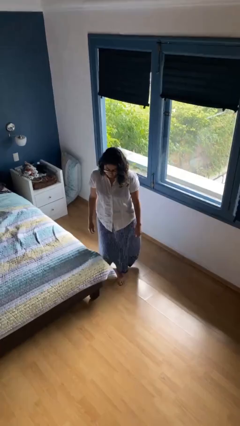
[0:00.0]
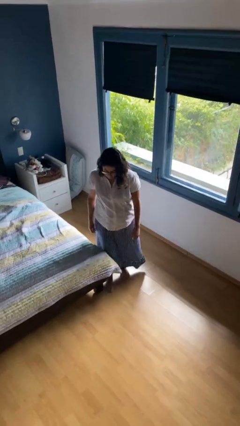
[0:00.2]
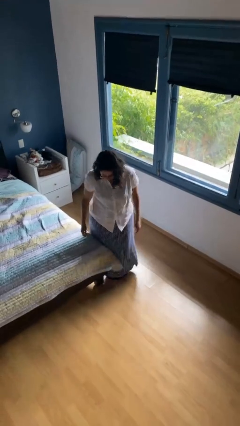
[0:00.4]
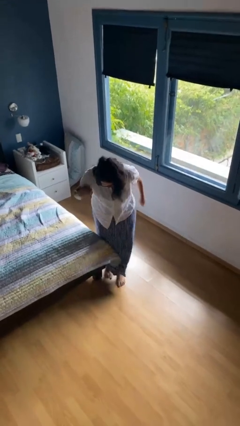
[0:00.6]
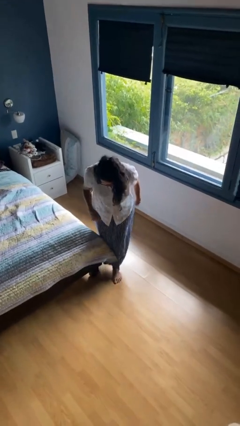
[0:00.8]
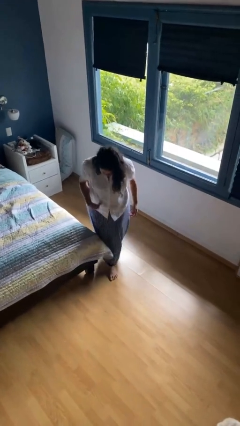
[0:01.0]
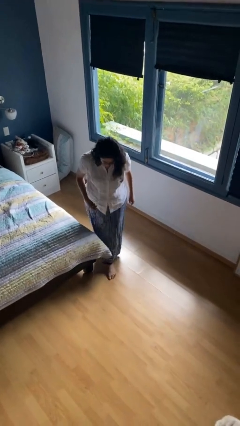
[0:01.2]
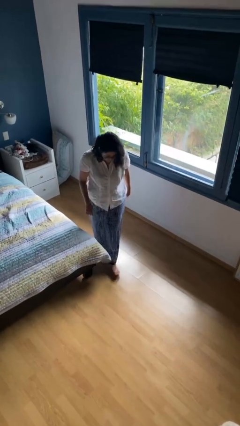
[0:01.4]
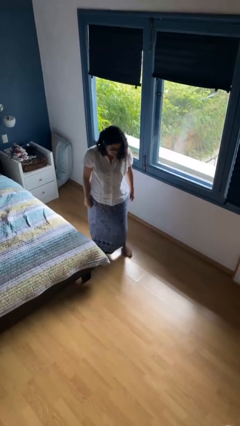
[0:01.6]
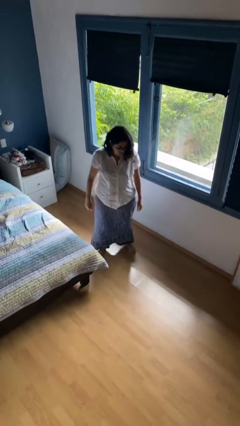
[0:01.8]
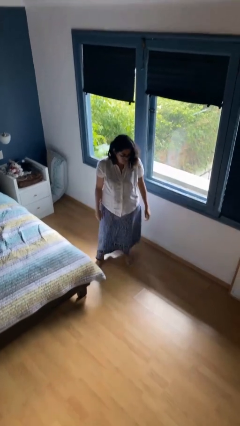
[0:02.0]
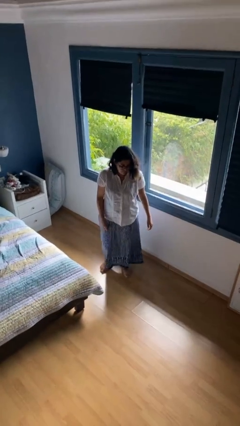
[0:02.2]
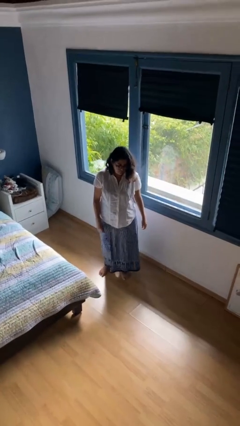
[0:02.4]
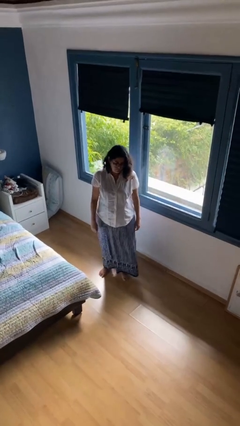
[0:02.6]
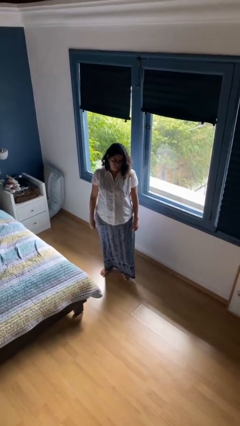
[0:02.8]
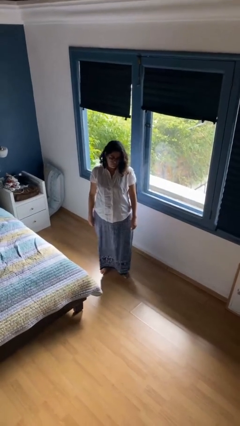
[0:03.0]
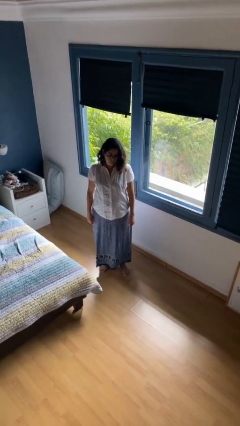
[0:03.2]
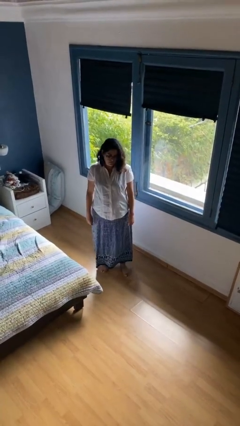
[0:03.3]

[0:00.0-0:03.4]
person stubs toe

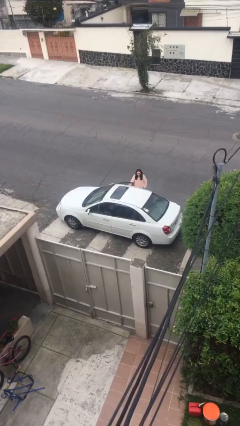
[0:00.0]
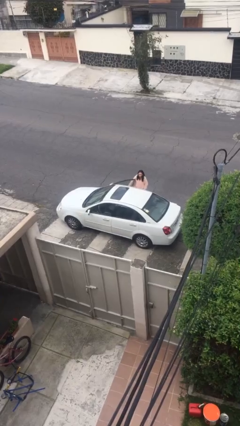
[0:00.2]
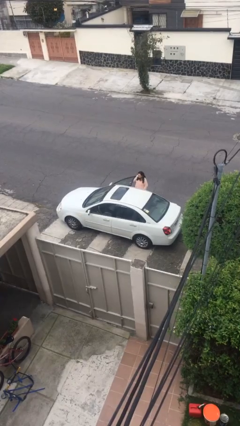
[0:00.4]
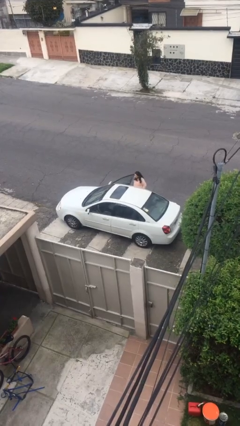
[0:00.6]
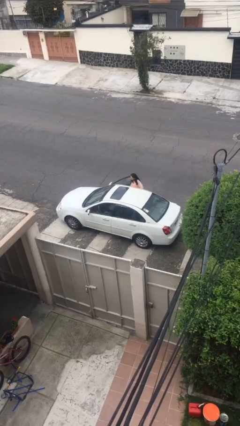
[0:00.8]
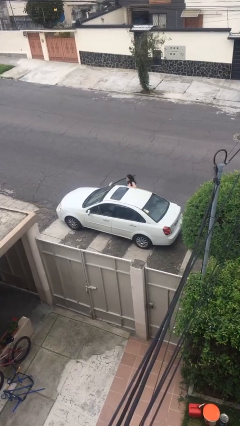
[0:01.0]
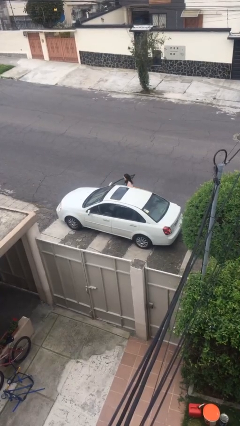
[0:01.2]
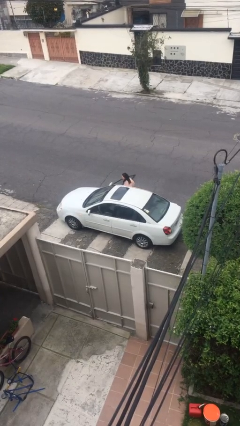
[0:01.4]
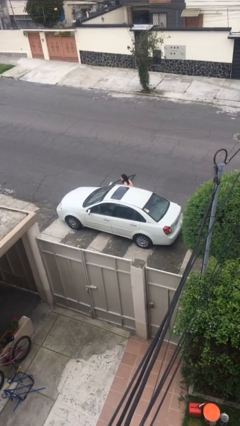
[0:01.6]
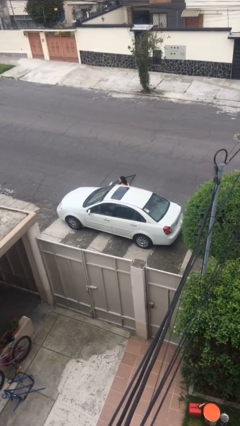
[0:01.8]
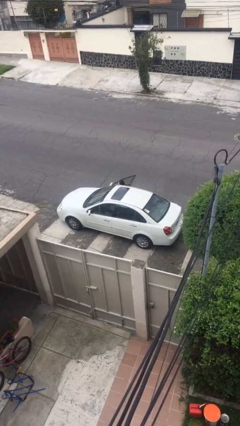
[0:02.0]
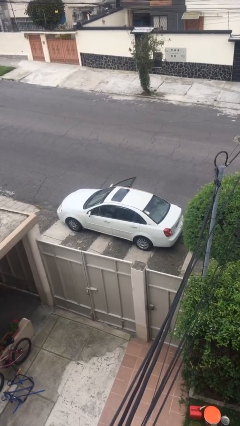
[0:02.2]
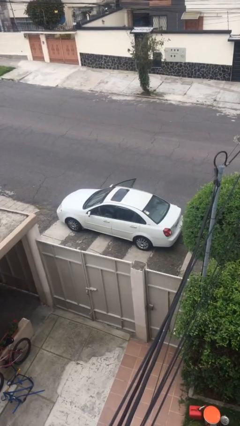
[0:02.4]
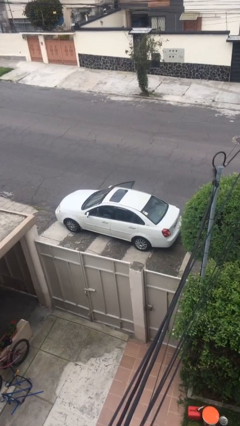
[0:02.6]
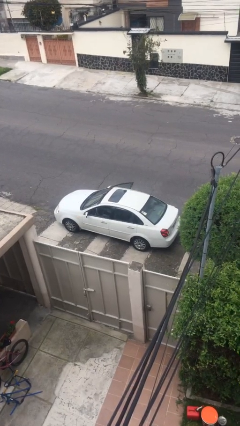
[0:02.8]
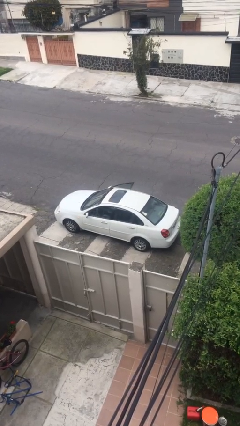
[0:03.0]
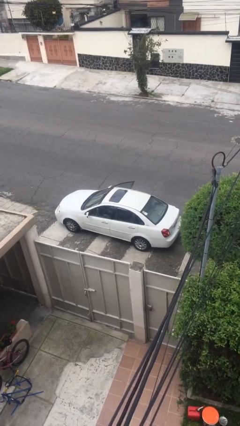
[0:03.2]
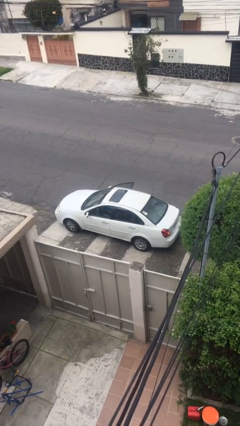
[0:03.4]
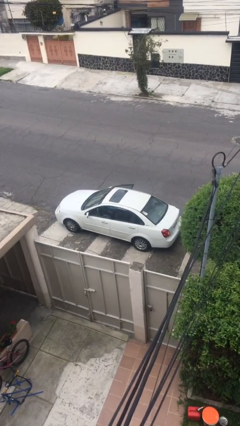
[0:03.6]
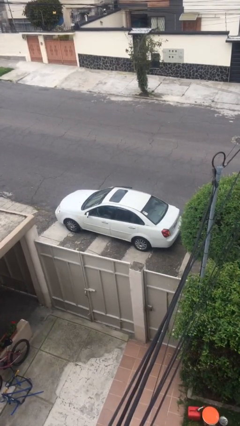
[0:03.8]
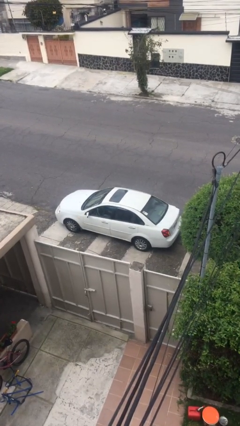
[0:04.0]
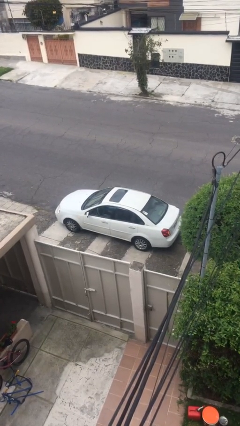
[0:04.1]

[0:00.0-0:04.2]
car picks up person

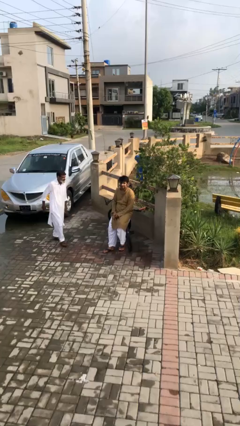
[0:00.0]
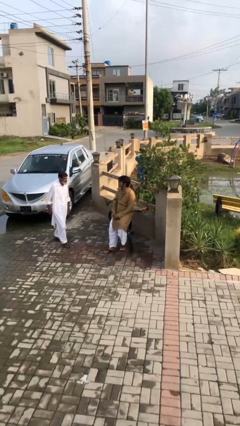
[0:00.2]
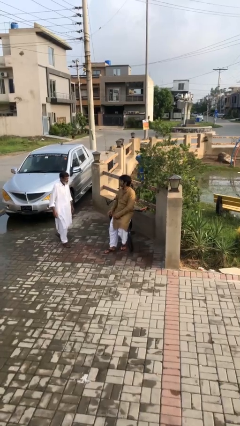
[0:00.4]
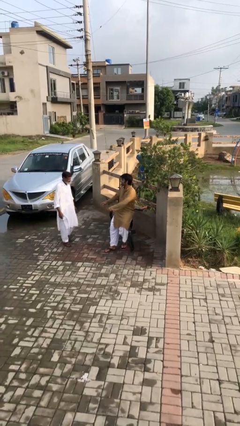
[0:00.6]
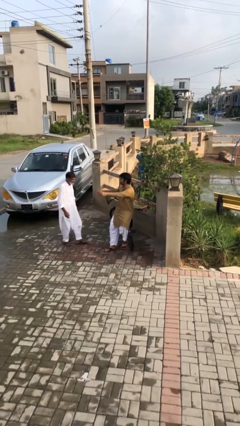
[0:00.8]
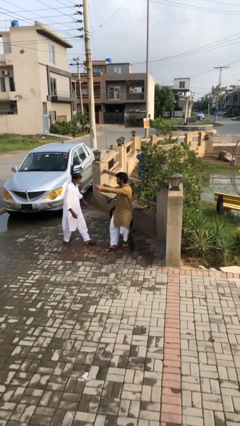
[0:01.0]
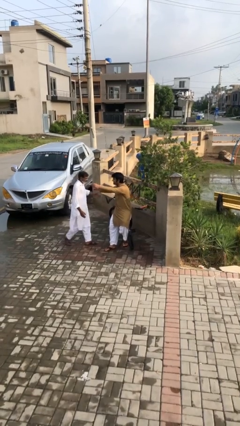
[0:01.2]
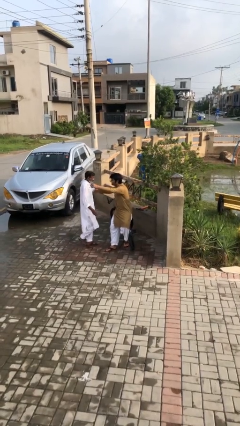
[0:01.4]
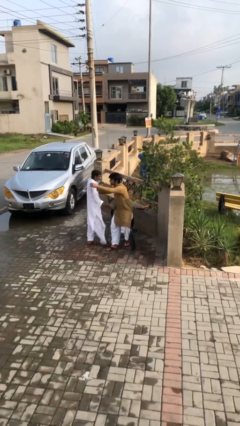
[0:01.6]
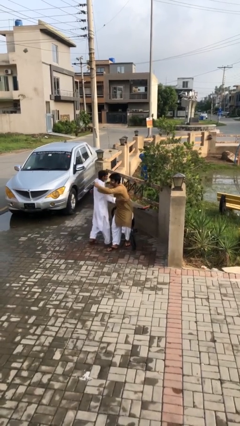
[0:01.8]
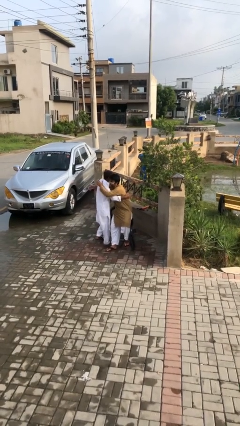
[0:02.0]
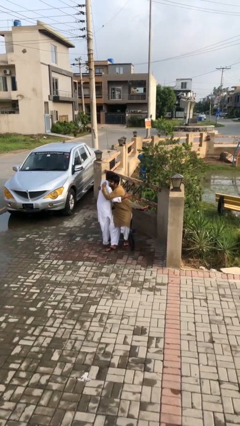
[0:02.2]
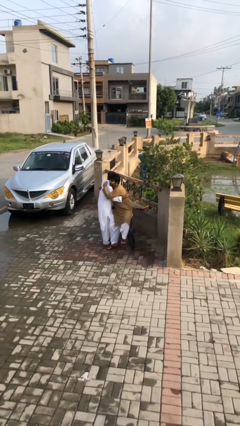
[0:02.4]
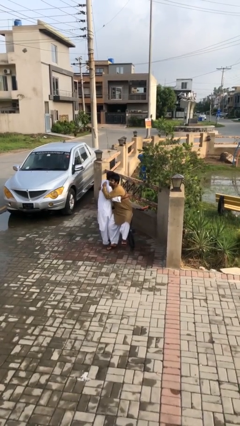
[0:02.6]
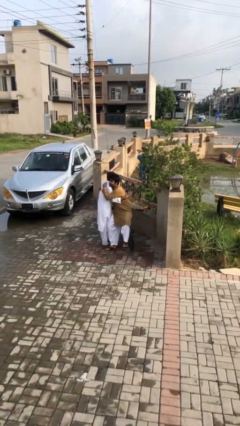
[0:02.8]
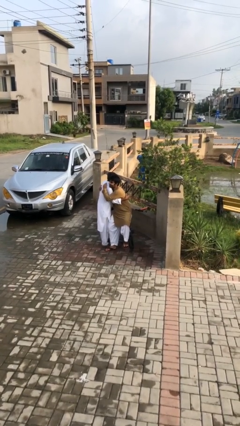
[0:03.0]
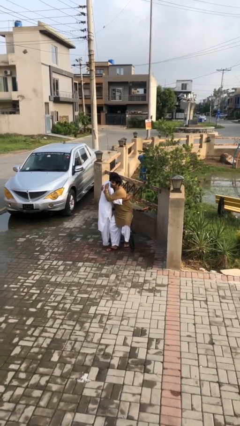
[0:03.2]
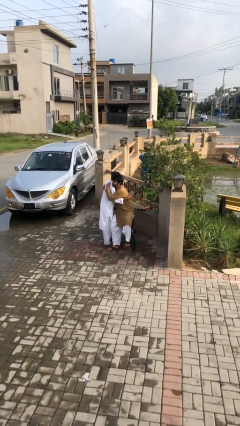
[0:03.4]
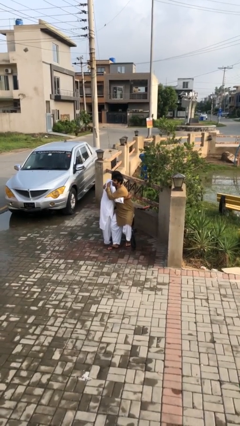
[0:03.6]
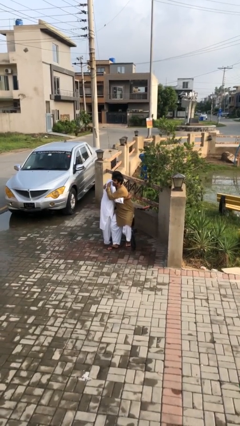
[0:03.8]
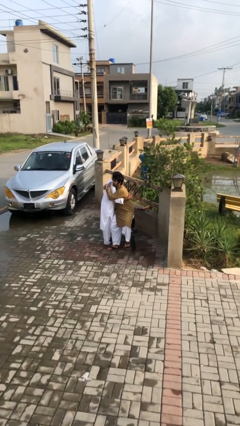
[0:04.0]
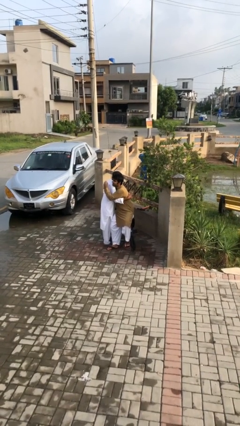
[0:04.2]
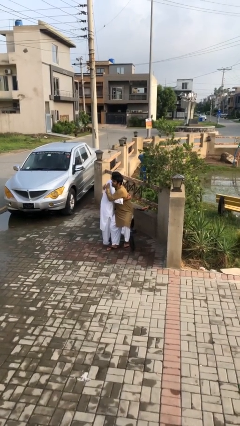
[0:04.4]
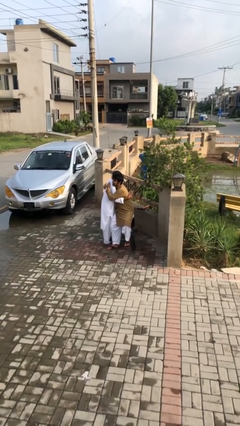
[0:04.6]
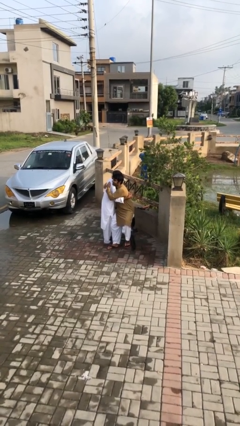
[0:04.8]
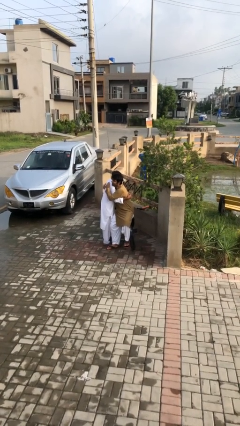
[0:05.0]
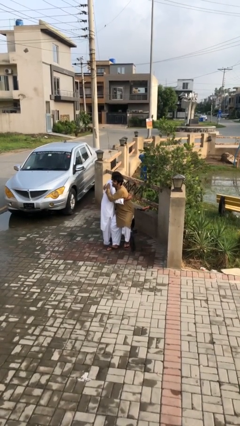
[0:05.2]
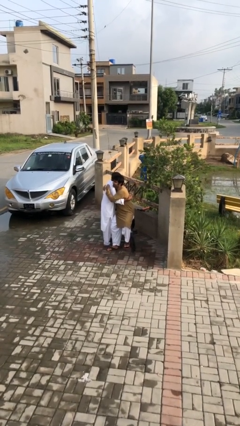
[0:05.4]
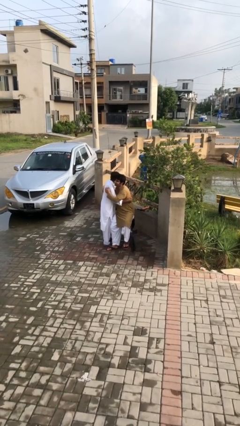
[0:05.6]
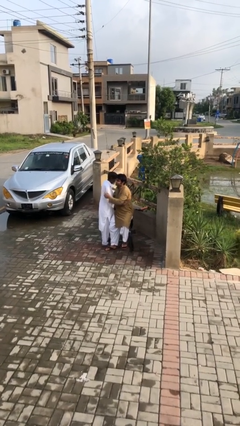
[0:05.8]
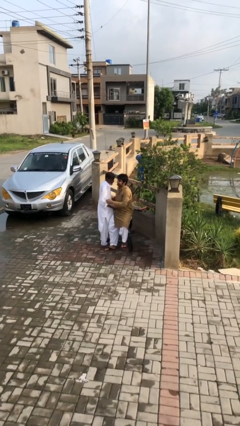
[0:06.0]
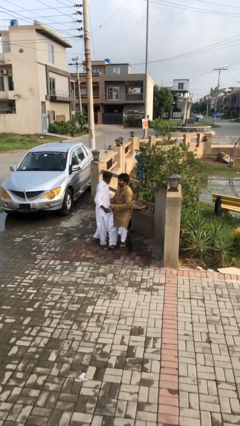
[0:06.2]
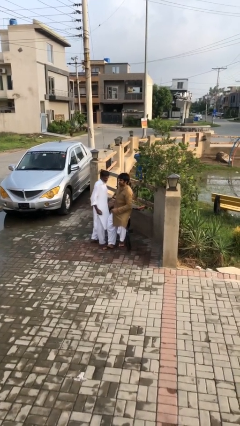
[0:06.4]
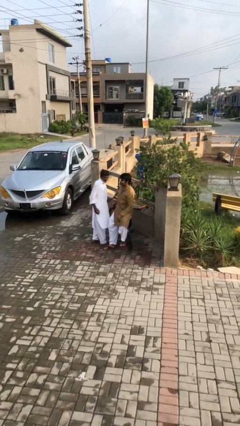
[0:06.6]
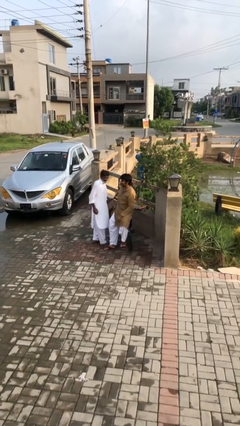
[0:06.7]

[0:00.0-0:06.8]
person embraces person

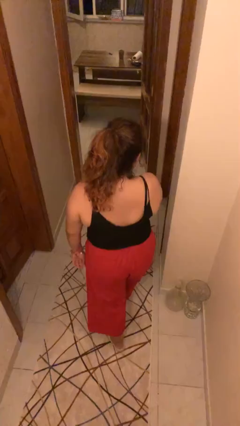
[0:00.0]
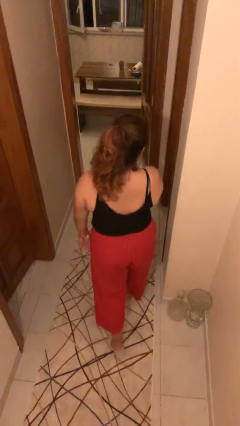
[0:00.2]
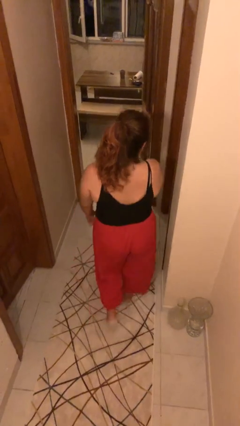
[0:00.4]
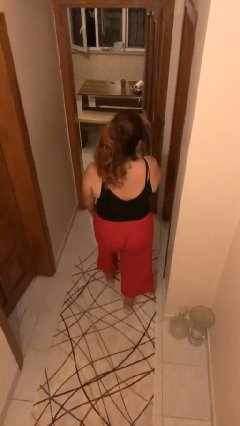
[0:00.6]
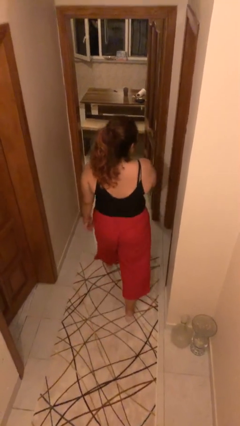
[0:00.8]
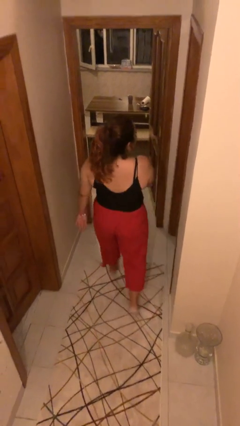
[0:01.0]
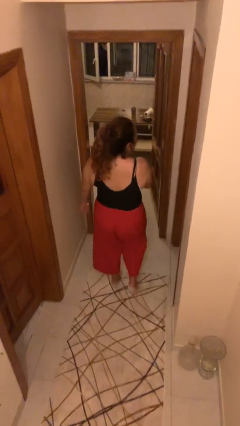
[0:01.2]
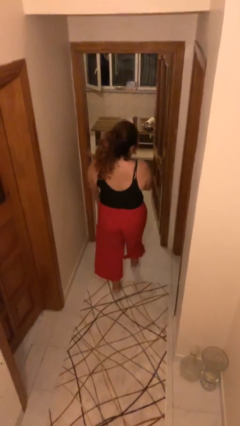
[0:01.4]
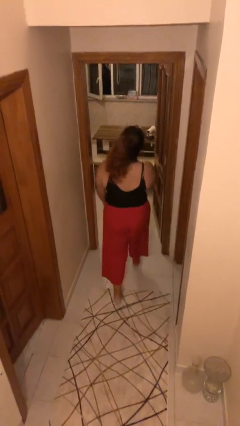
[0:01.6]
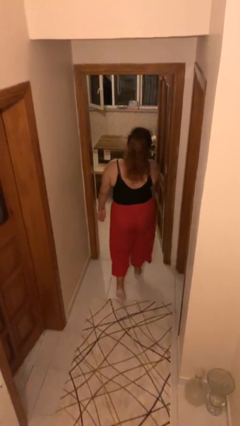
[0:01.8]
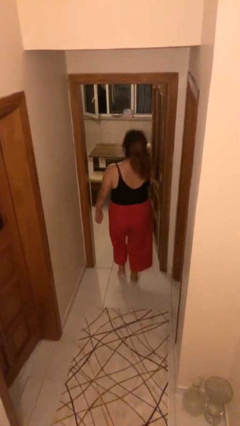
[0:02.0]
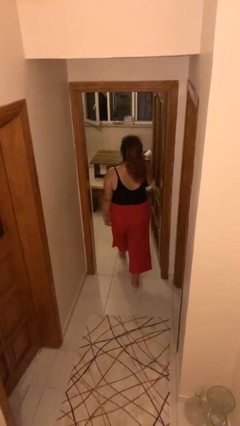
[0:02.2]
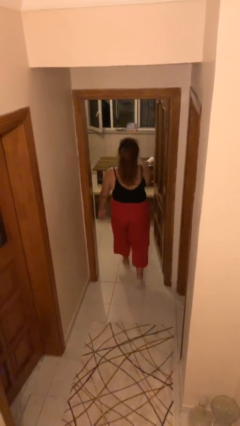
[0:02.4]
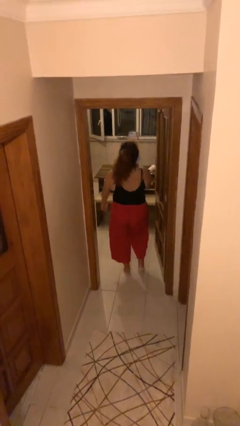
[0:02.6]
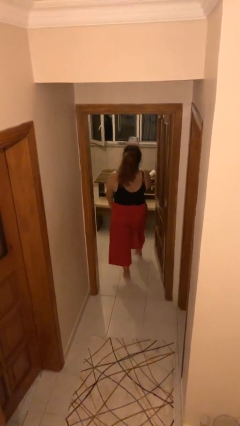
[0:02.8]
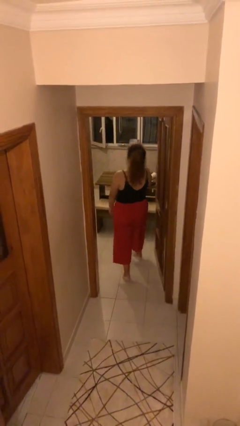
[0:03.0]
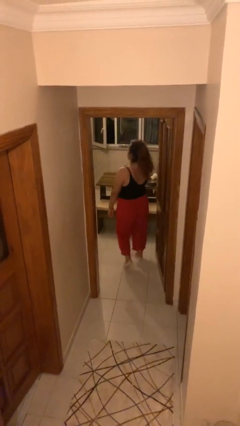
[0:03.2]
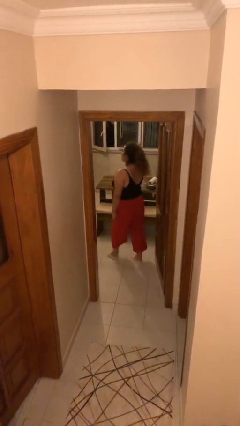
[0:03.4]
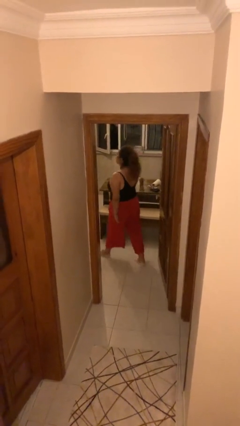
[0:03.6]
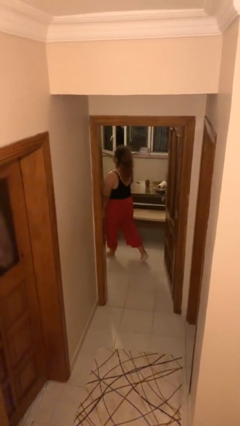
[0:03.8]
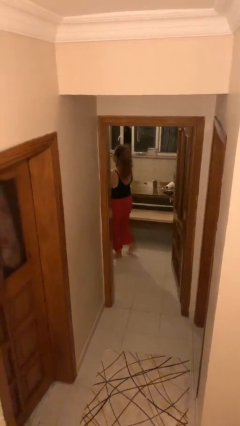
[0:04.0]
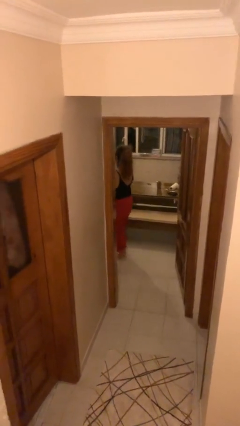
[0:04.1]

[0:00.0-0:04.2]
person exits scene through structure
